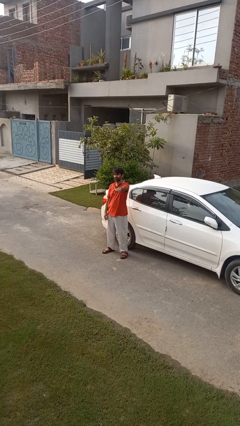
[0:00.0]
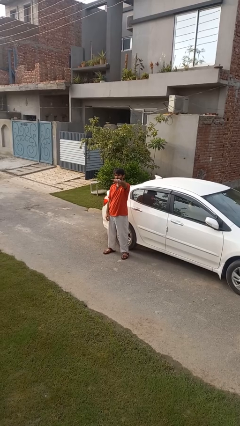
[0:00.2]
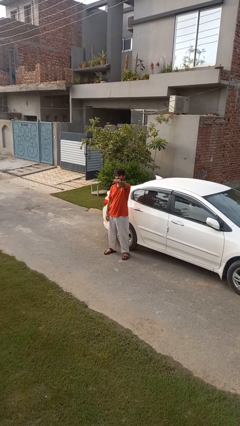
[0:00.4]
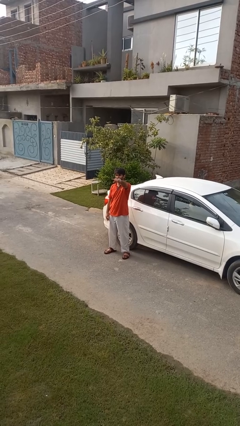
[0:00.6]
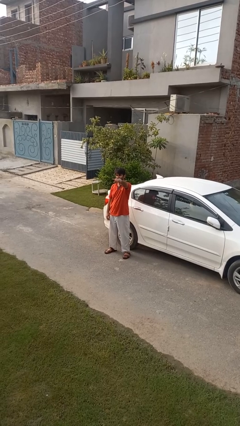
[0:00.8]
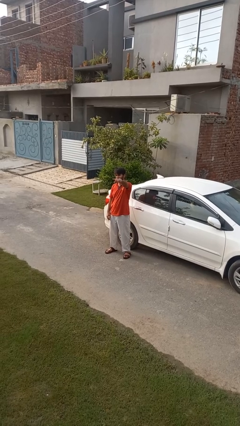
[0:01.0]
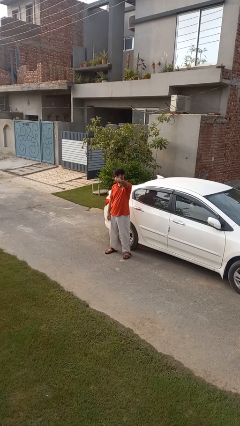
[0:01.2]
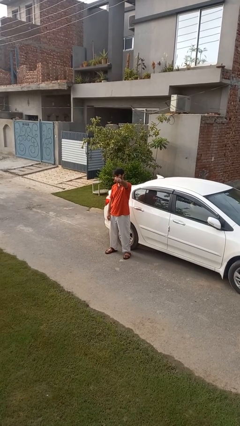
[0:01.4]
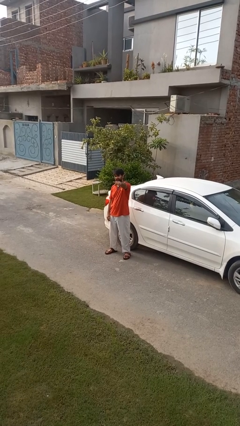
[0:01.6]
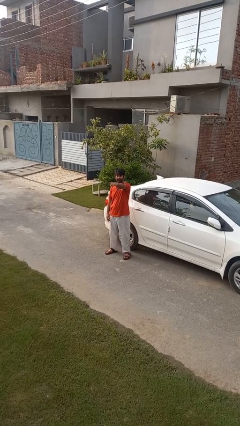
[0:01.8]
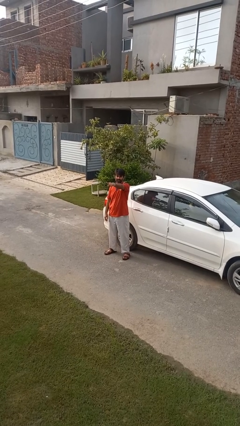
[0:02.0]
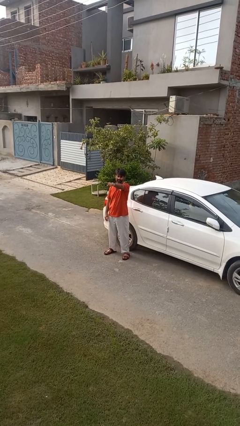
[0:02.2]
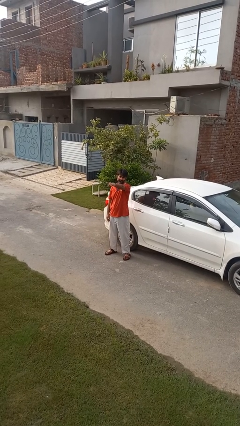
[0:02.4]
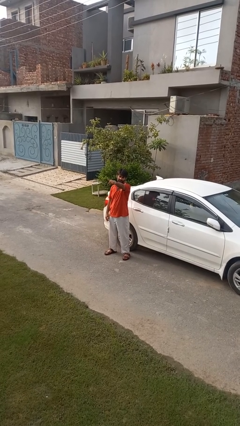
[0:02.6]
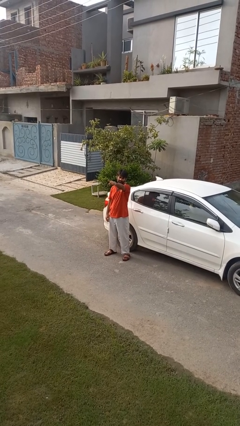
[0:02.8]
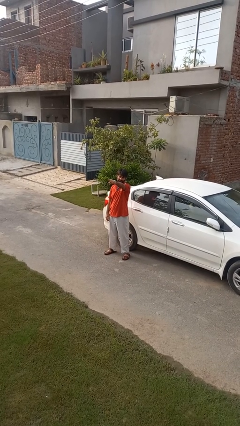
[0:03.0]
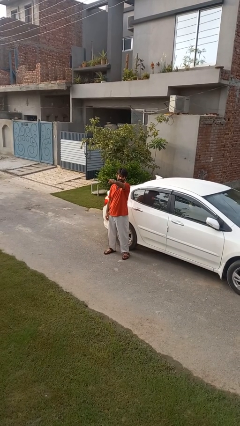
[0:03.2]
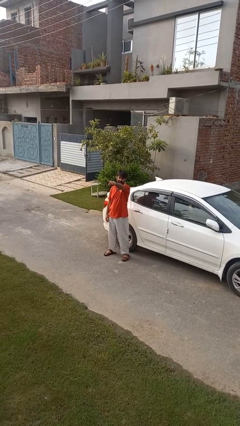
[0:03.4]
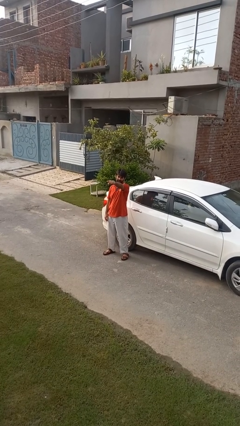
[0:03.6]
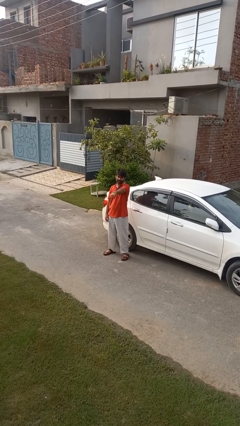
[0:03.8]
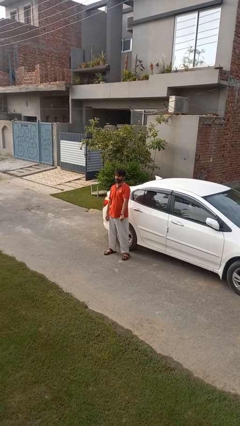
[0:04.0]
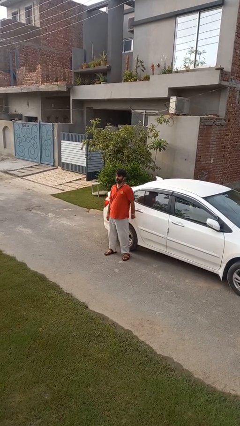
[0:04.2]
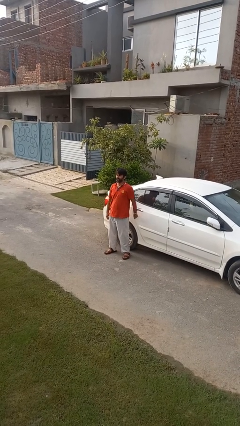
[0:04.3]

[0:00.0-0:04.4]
person points at person

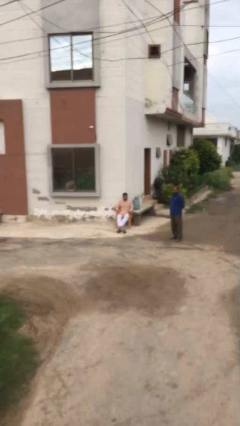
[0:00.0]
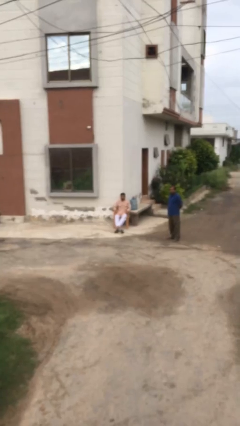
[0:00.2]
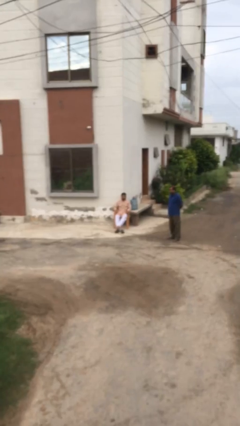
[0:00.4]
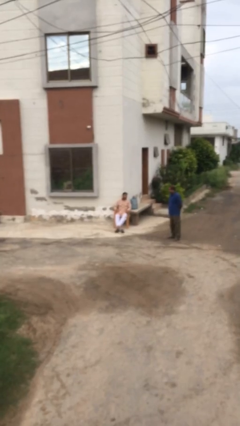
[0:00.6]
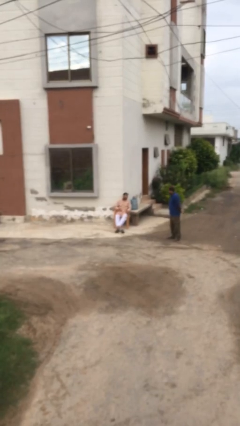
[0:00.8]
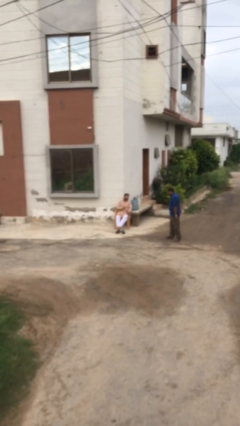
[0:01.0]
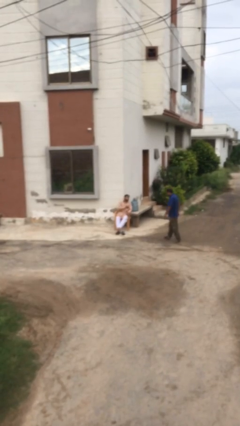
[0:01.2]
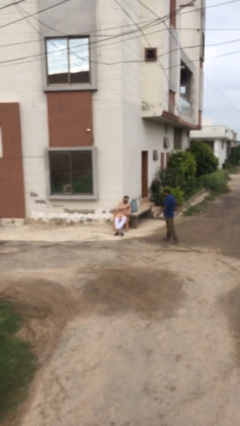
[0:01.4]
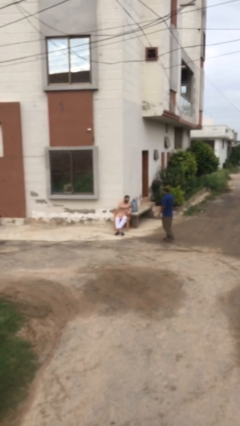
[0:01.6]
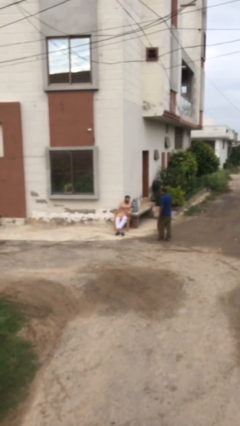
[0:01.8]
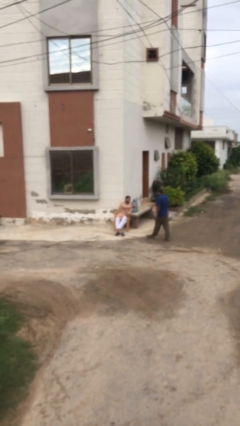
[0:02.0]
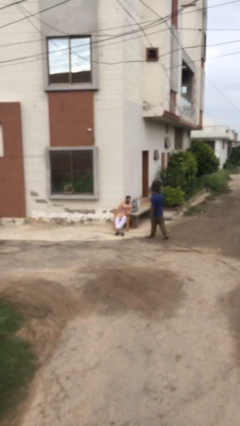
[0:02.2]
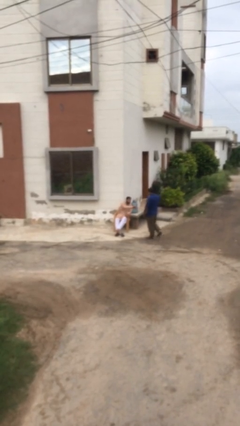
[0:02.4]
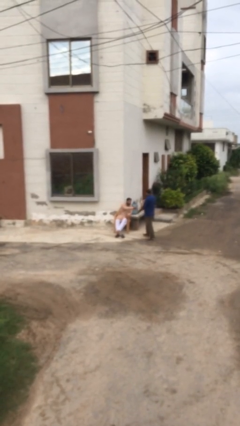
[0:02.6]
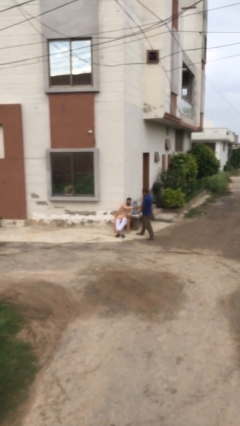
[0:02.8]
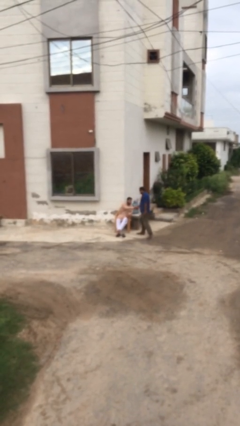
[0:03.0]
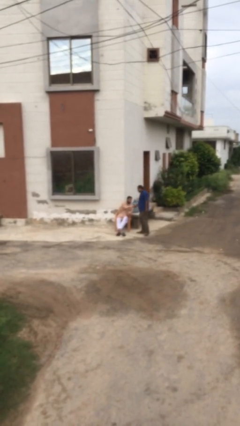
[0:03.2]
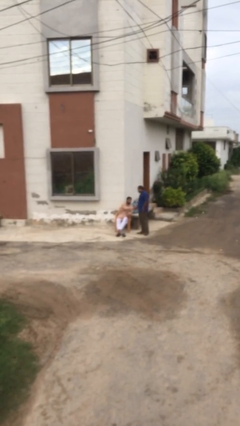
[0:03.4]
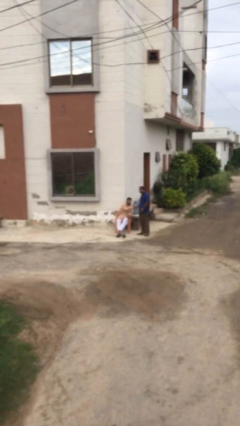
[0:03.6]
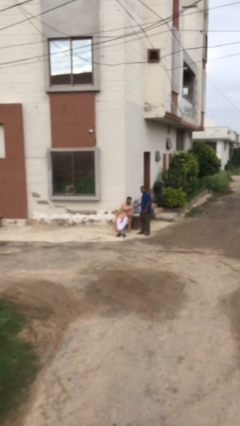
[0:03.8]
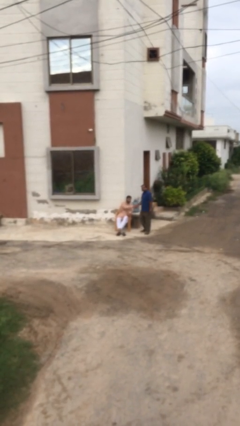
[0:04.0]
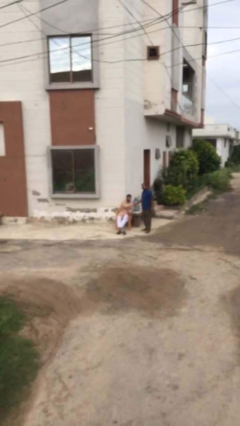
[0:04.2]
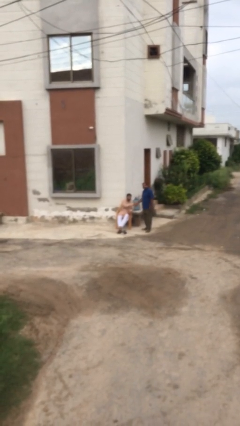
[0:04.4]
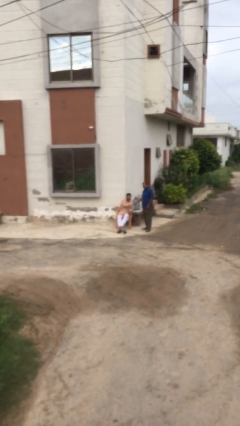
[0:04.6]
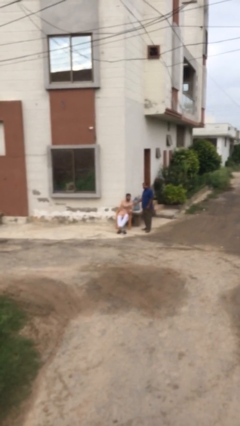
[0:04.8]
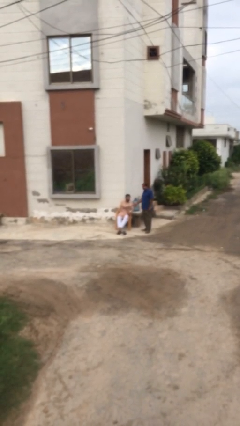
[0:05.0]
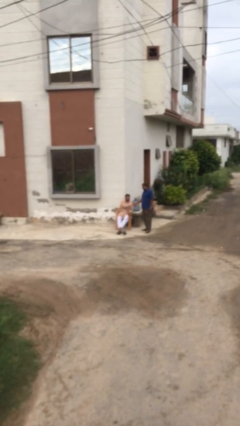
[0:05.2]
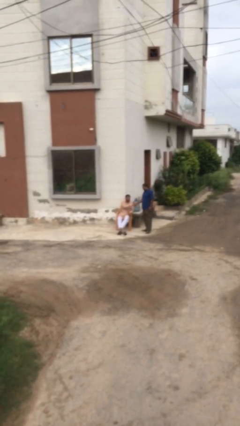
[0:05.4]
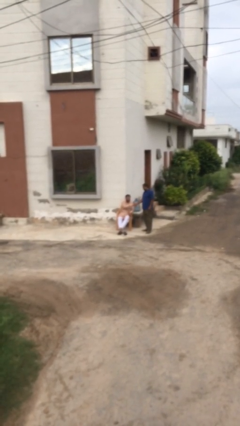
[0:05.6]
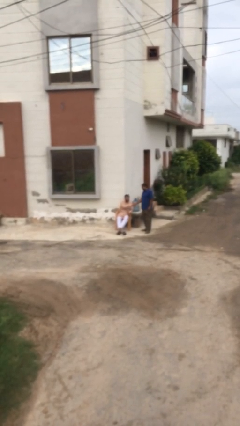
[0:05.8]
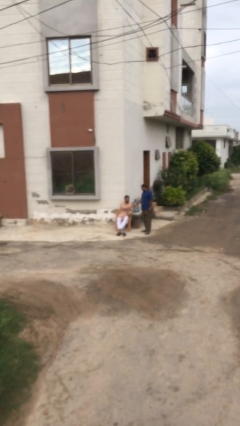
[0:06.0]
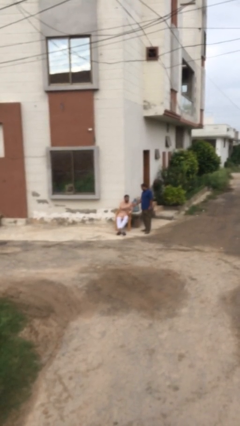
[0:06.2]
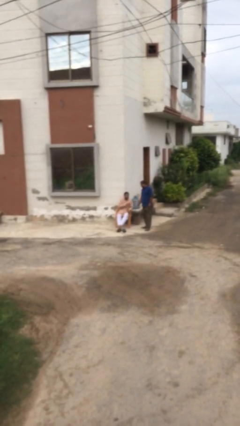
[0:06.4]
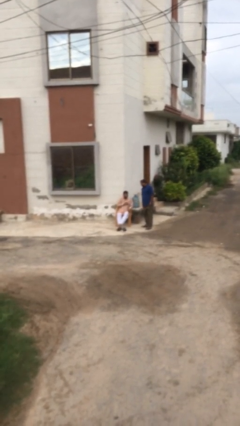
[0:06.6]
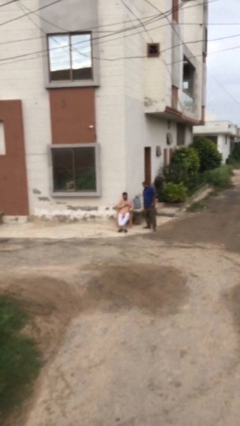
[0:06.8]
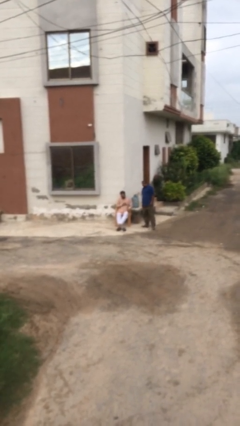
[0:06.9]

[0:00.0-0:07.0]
person shakes hand

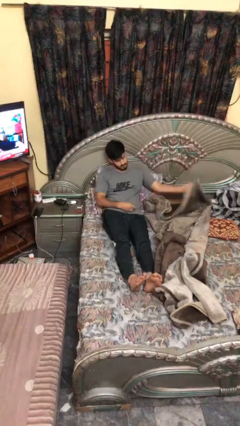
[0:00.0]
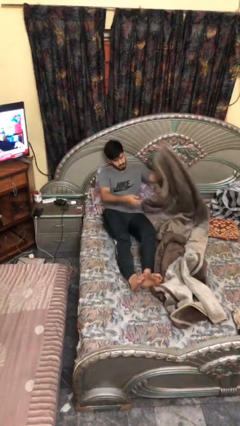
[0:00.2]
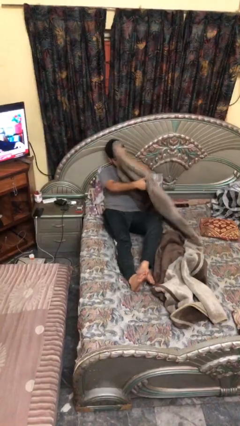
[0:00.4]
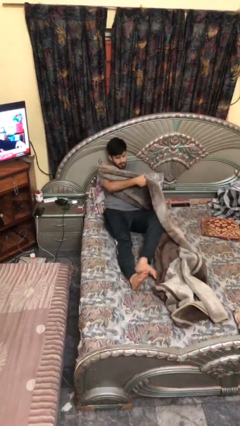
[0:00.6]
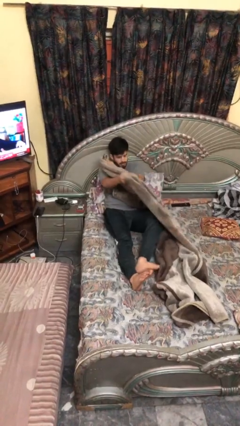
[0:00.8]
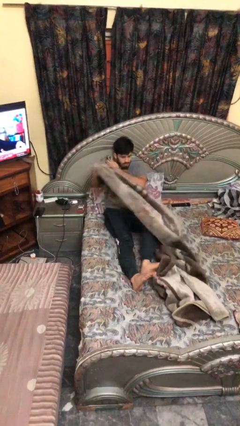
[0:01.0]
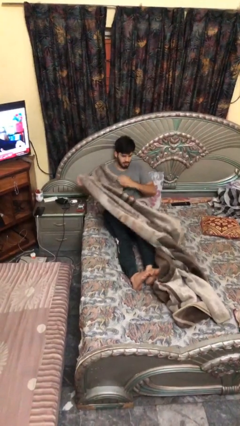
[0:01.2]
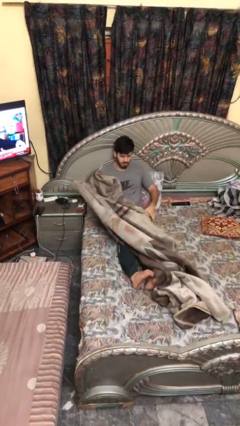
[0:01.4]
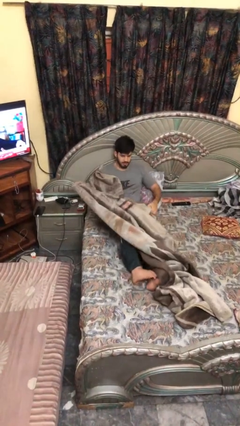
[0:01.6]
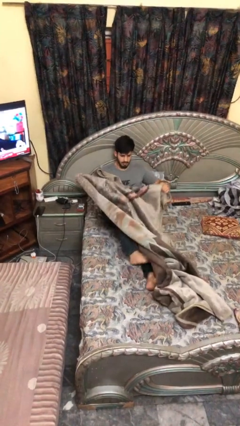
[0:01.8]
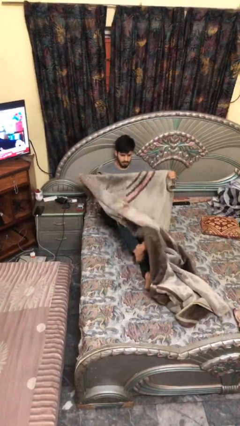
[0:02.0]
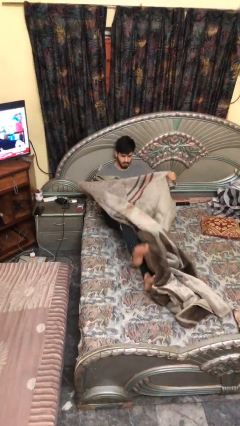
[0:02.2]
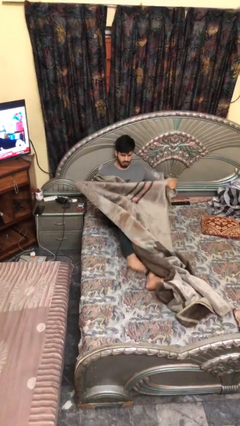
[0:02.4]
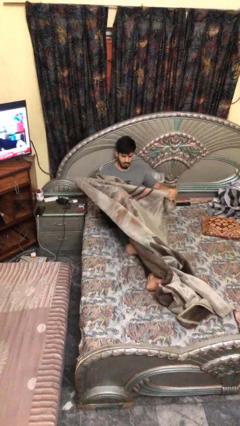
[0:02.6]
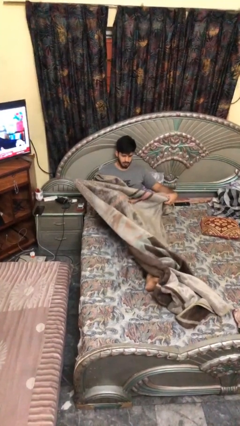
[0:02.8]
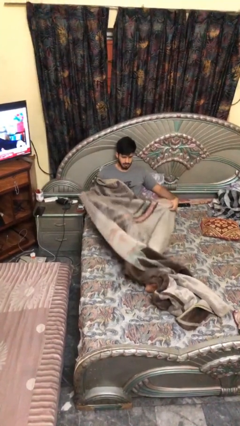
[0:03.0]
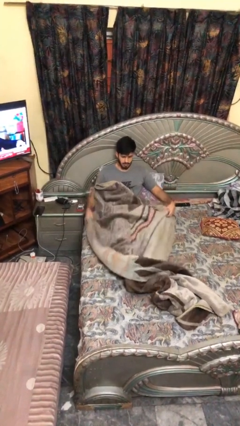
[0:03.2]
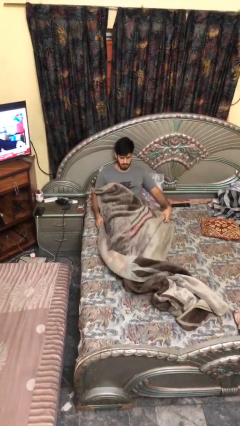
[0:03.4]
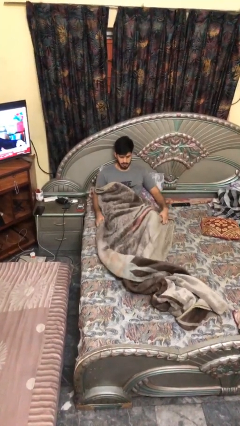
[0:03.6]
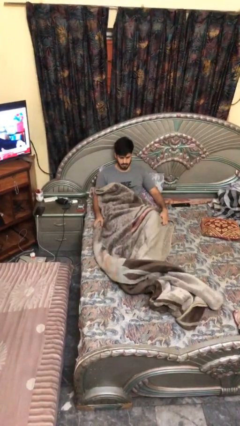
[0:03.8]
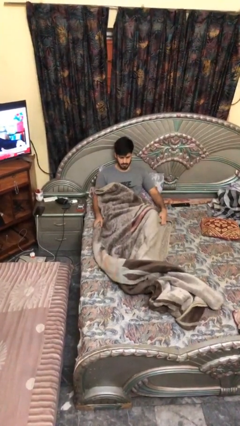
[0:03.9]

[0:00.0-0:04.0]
person covers with blanket

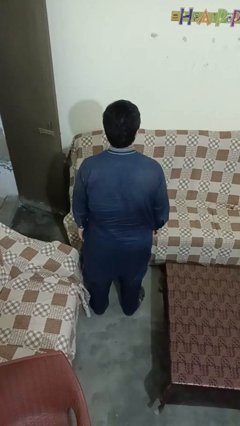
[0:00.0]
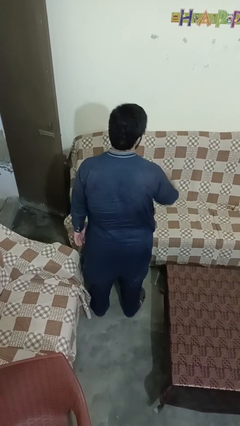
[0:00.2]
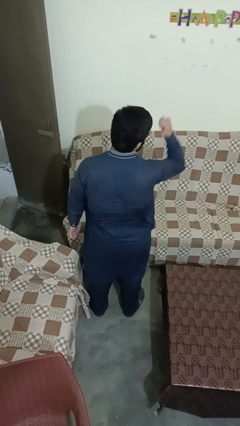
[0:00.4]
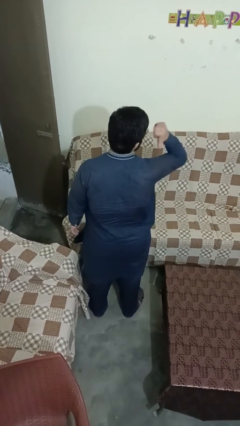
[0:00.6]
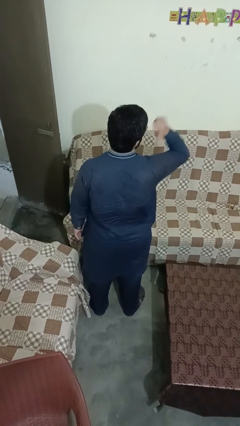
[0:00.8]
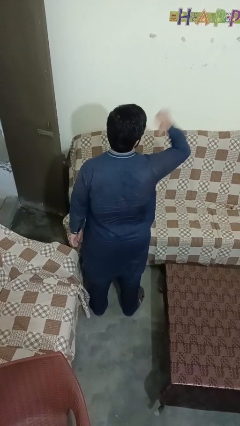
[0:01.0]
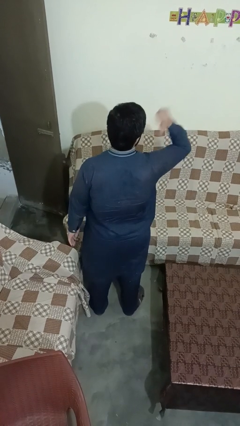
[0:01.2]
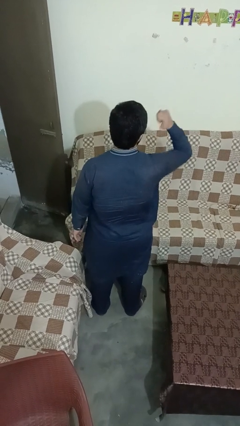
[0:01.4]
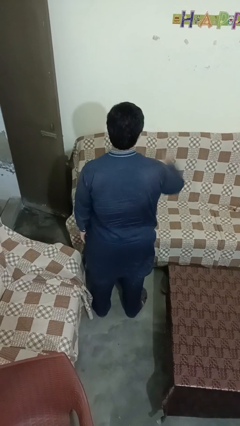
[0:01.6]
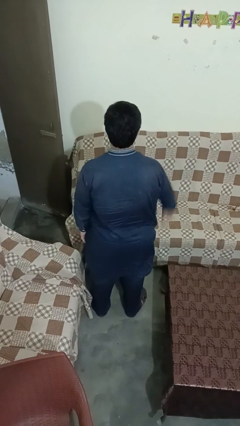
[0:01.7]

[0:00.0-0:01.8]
person gestures behind me

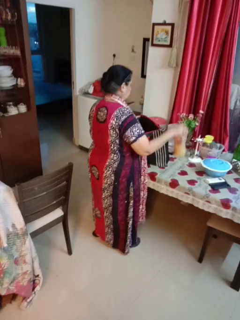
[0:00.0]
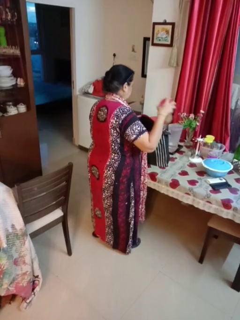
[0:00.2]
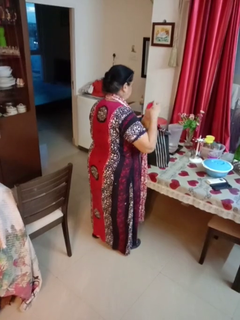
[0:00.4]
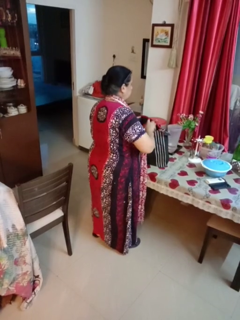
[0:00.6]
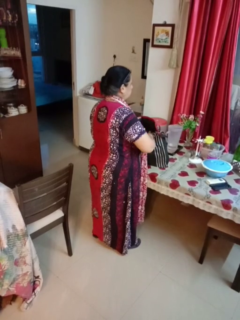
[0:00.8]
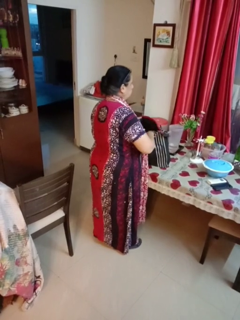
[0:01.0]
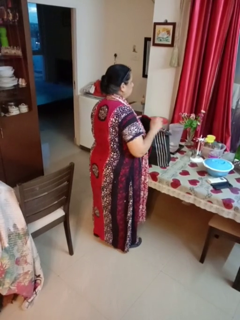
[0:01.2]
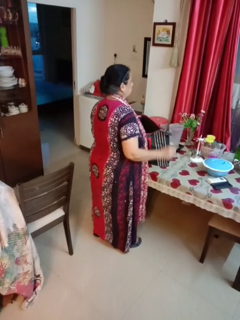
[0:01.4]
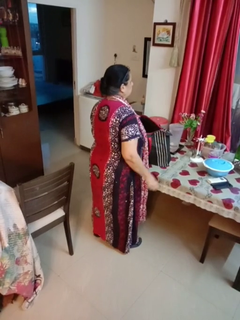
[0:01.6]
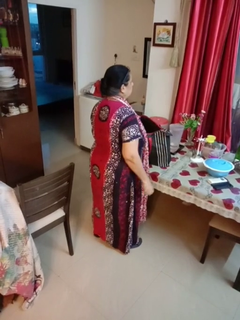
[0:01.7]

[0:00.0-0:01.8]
person puts object into bag
